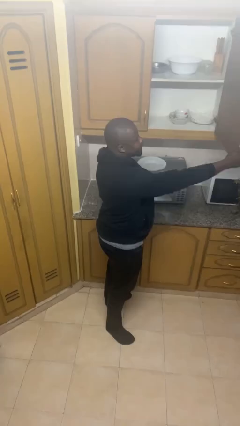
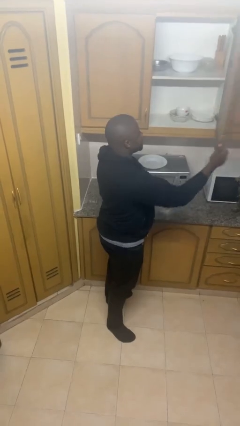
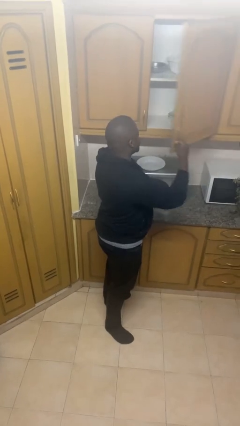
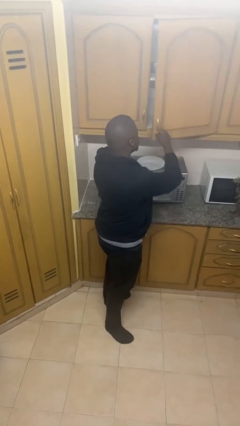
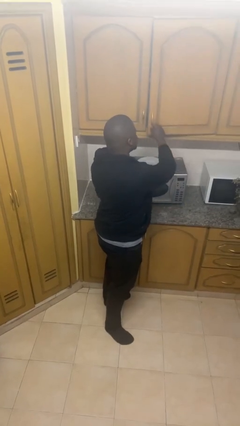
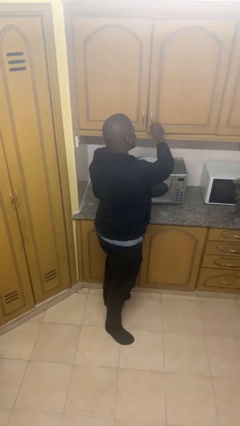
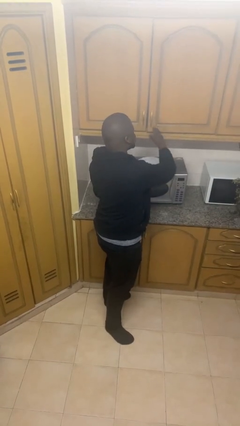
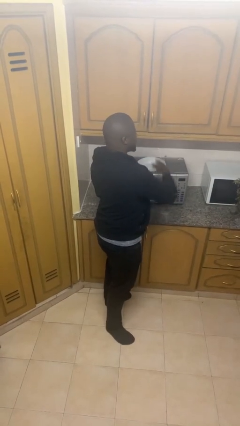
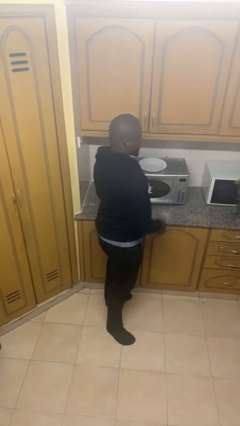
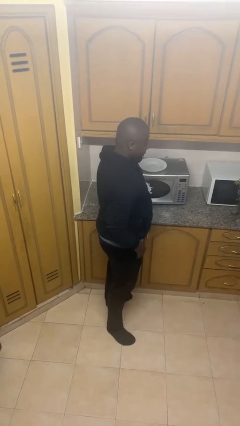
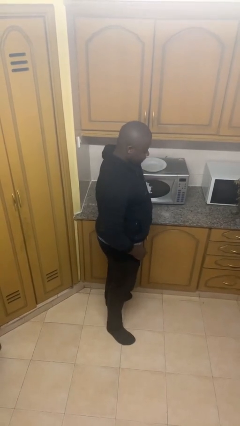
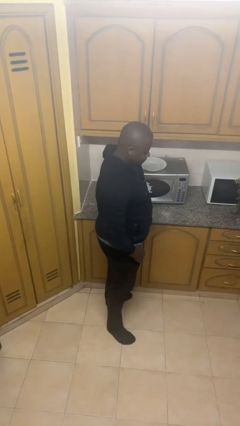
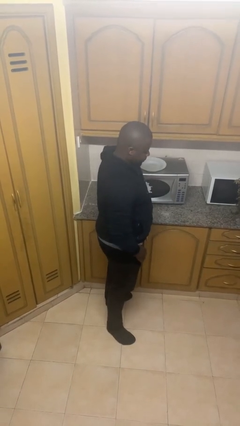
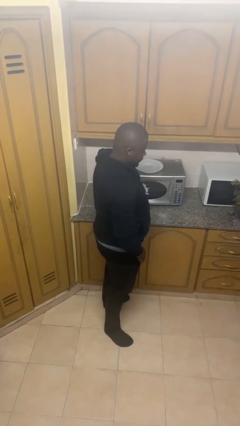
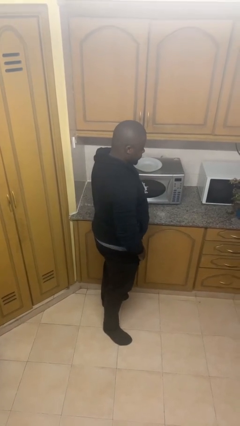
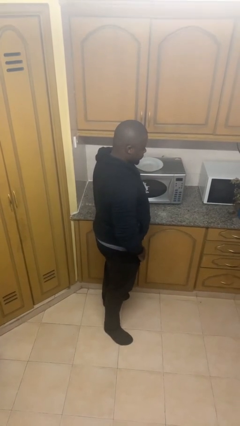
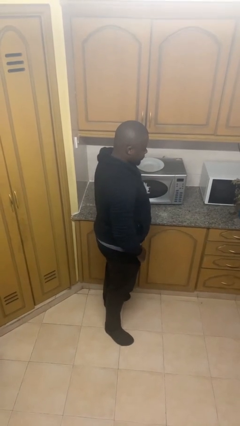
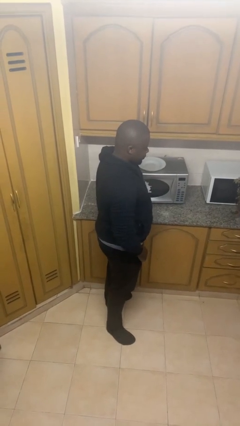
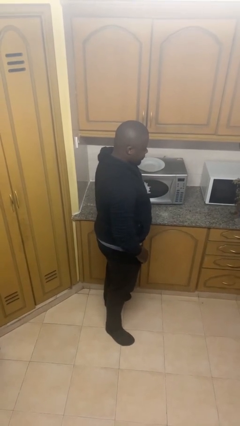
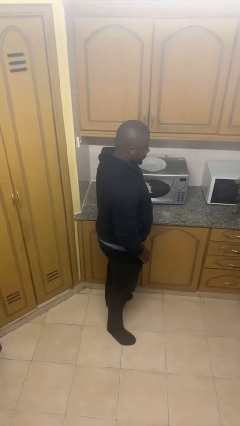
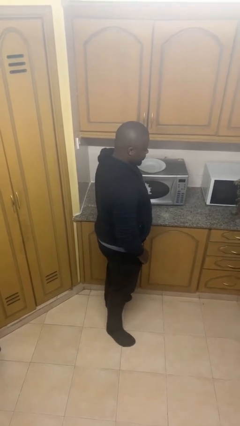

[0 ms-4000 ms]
person closes cabinet

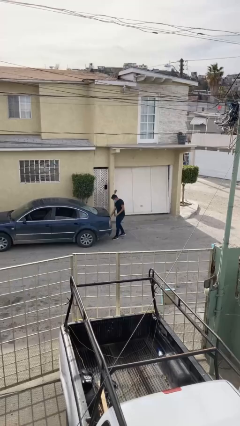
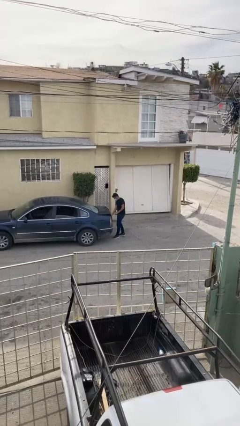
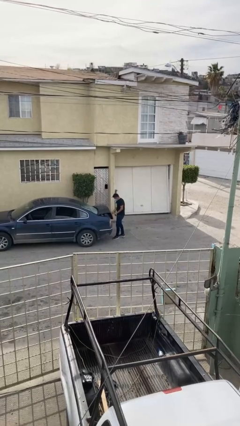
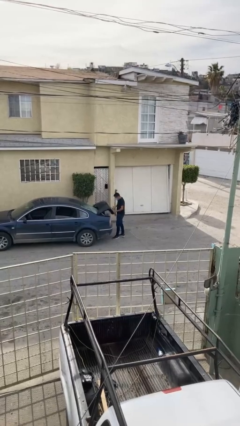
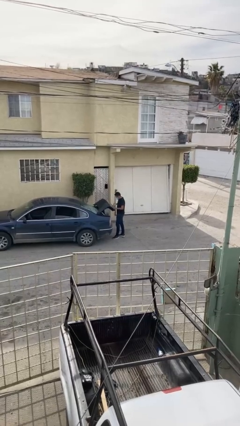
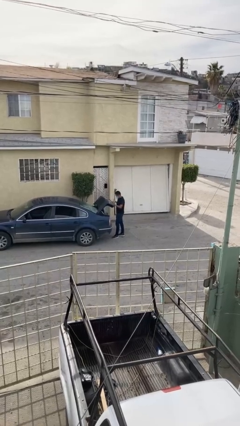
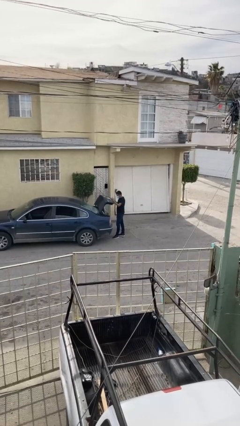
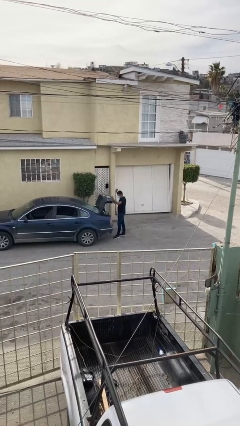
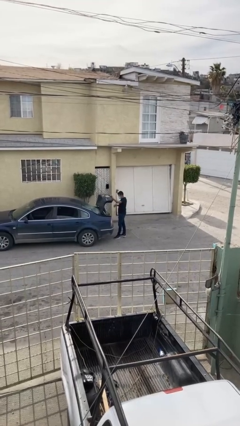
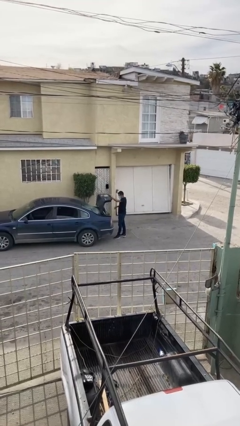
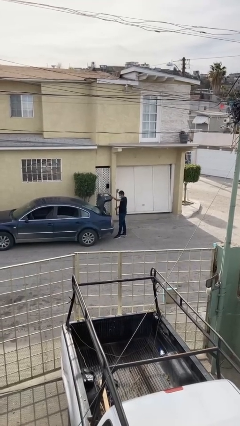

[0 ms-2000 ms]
person opens car trunk

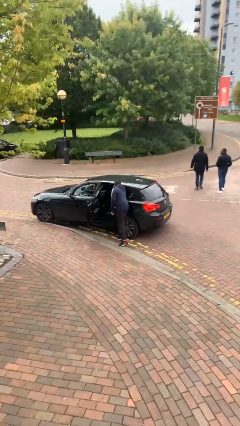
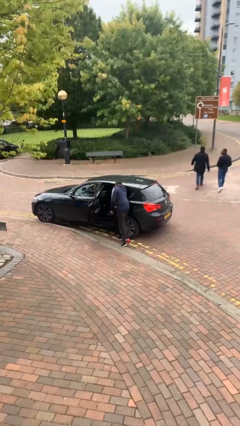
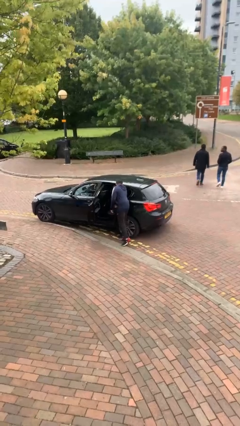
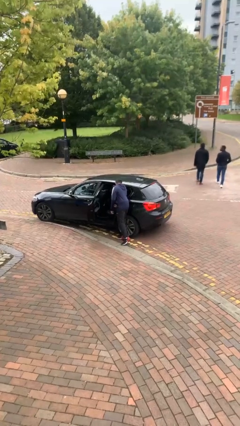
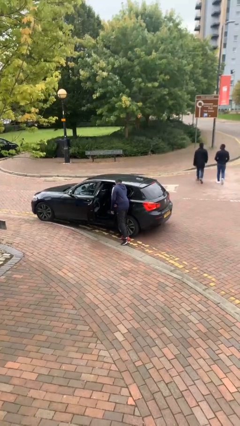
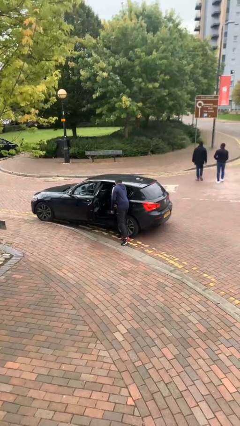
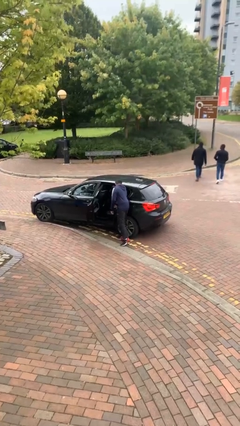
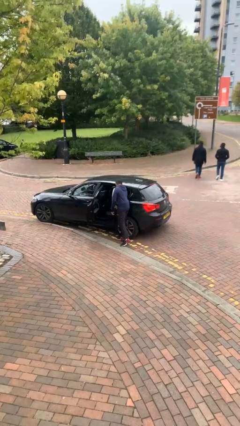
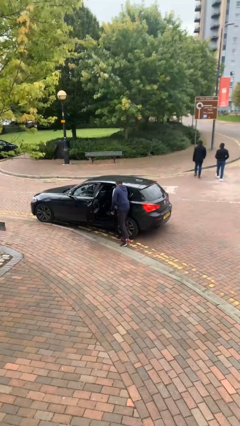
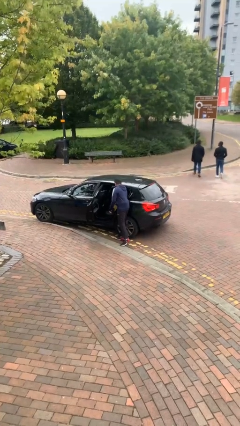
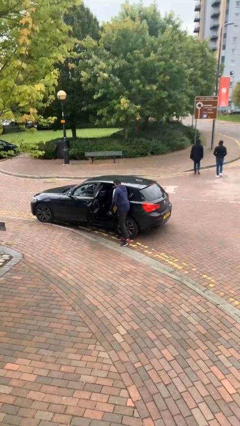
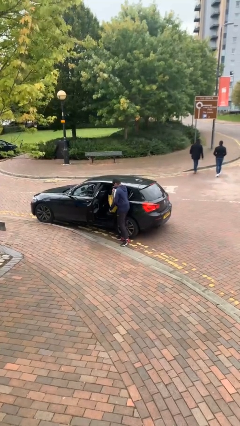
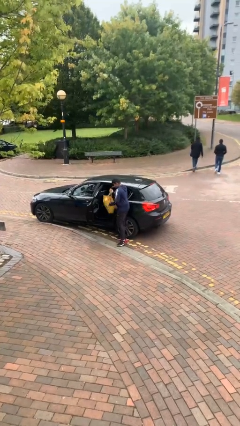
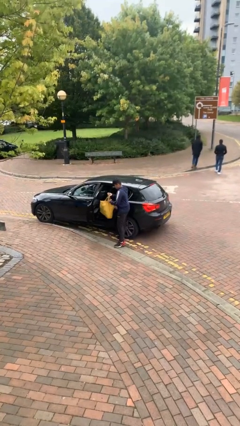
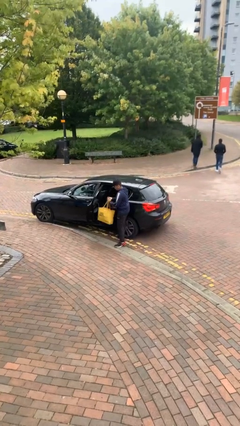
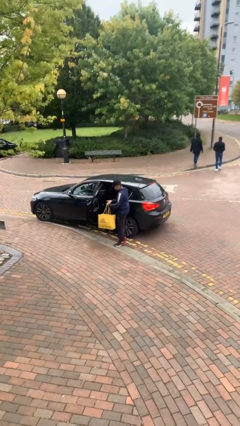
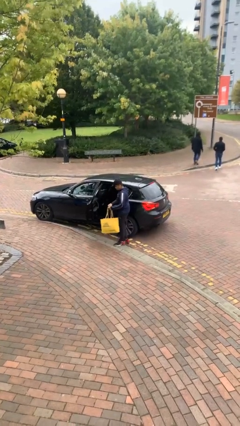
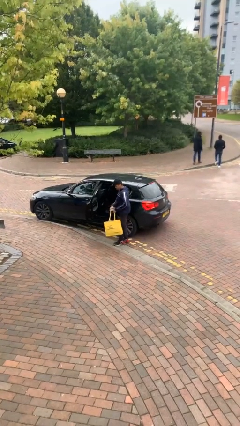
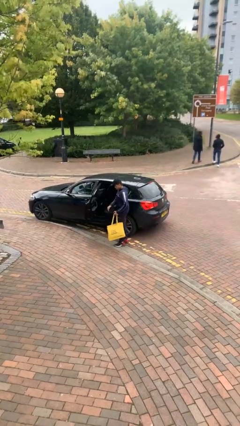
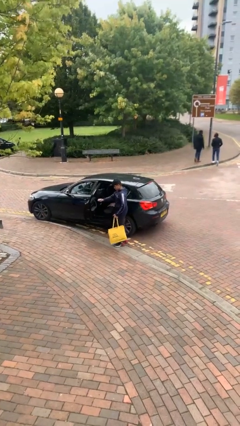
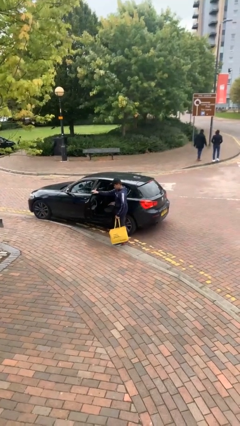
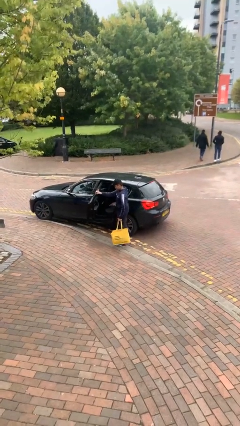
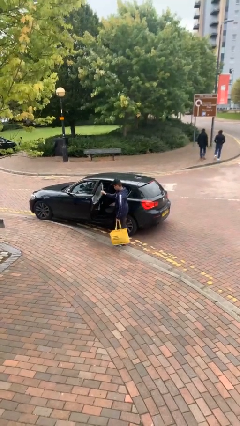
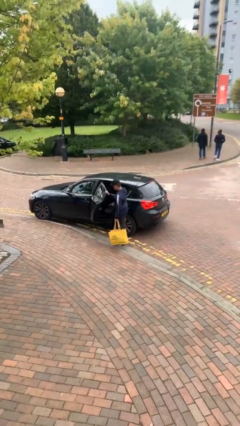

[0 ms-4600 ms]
person unloads car

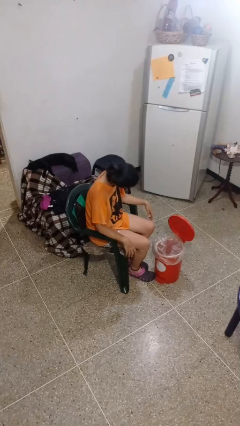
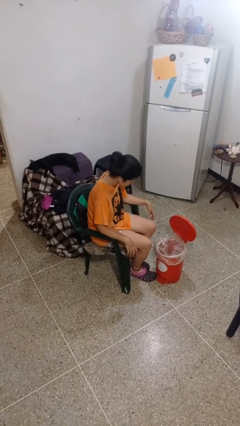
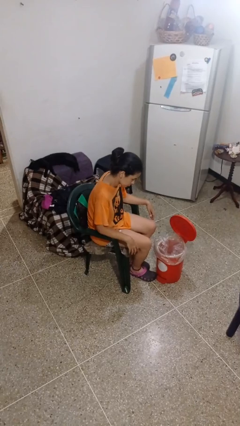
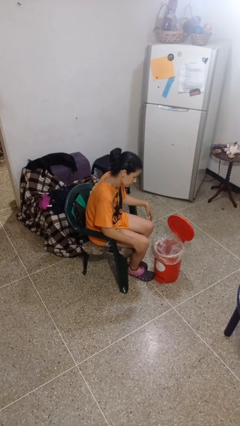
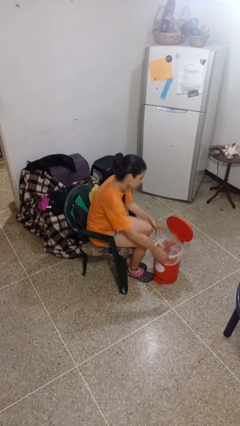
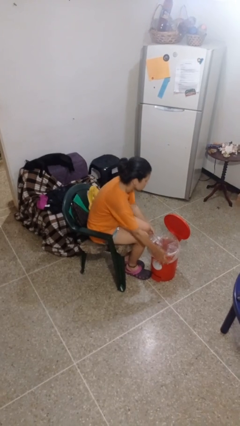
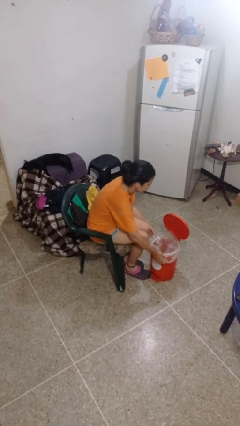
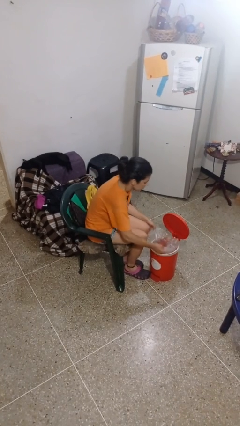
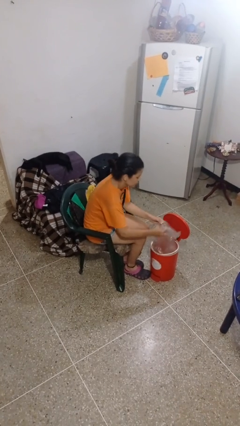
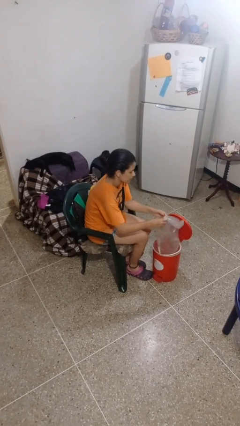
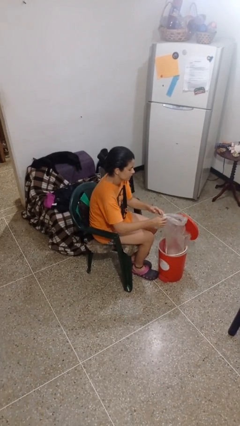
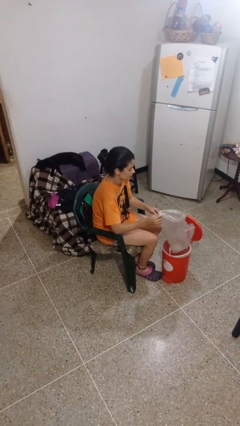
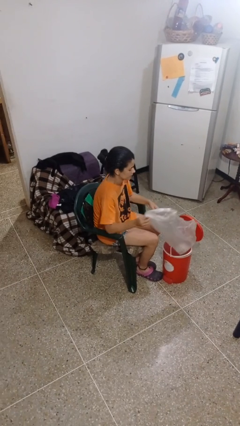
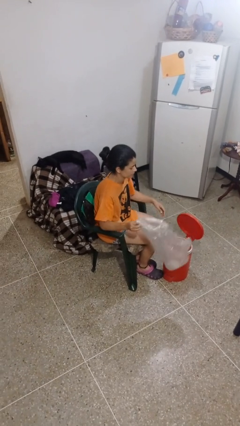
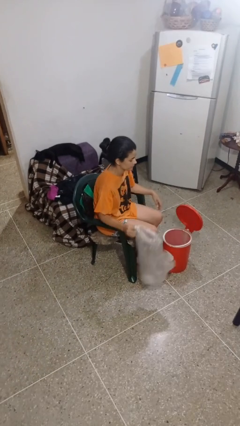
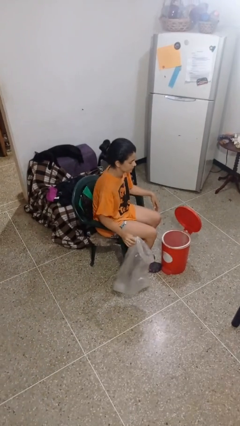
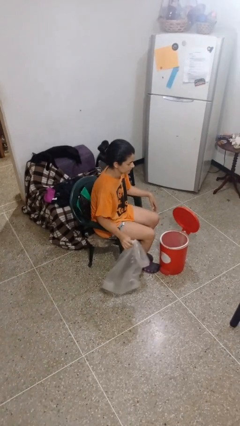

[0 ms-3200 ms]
person removes trashbag from trashcan

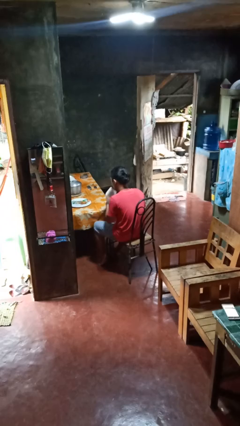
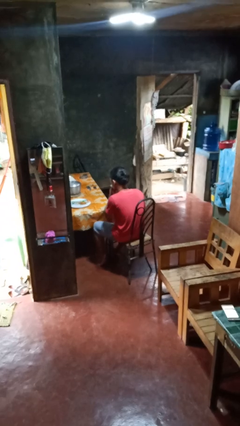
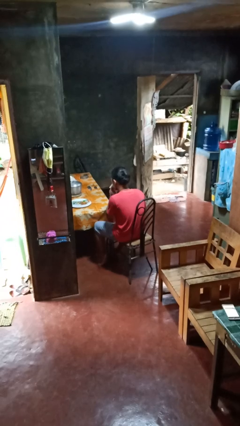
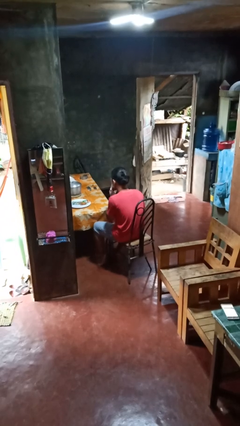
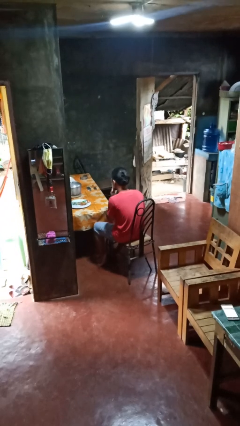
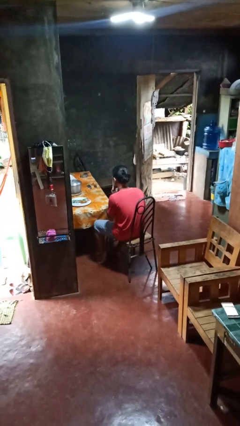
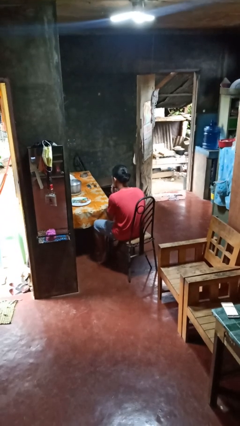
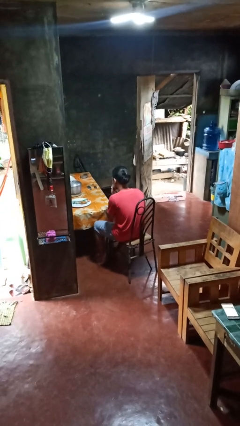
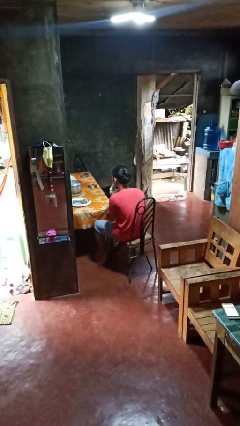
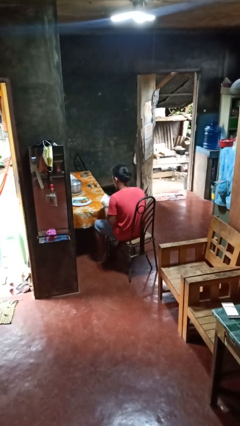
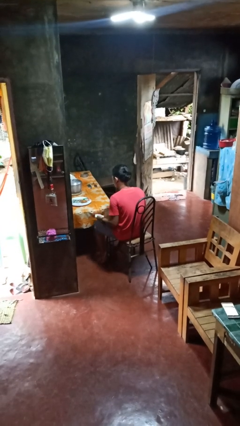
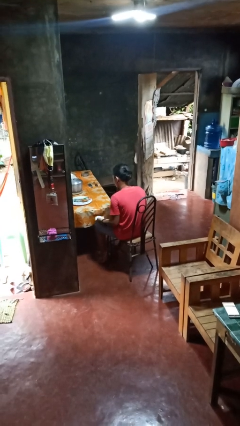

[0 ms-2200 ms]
person wipes mouth with napkin

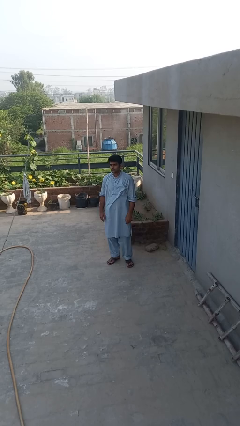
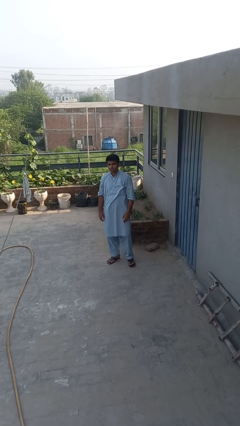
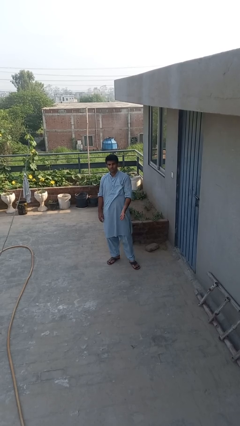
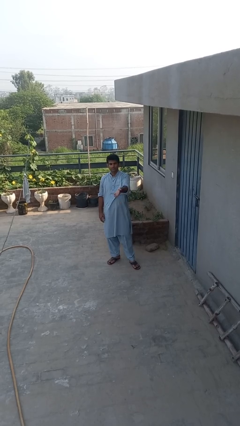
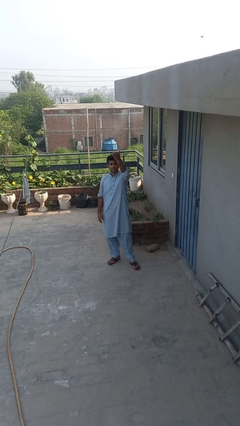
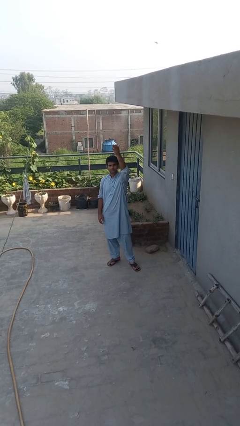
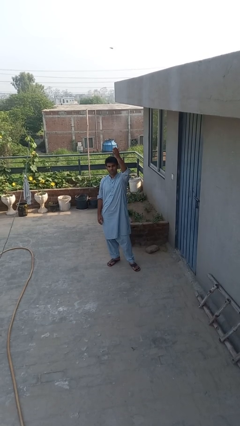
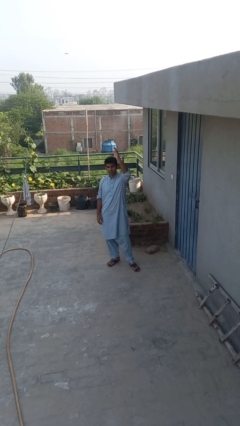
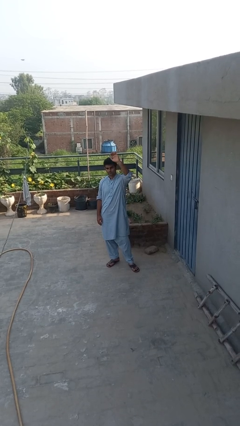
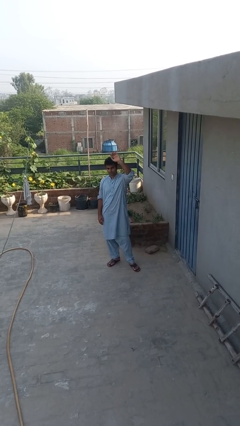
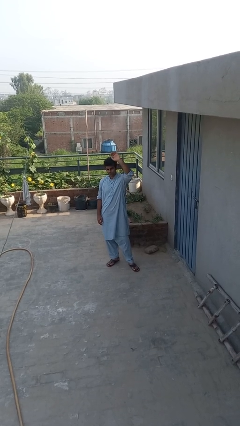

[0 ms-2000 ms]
person gestures swipe up
